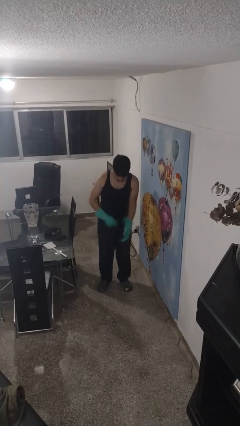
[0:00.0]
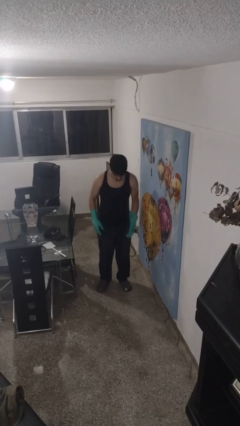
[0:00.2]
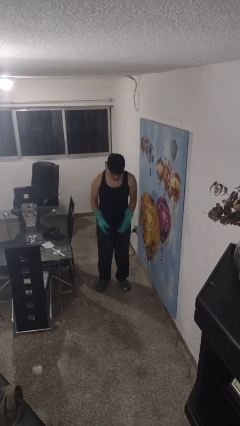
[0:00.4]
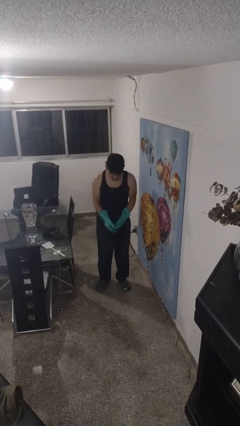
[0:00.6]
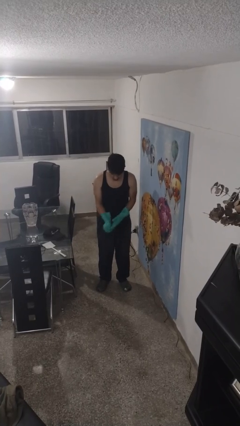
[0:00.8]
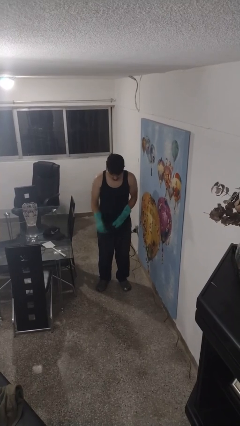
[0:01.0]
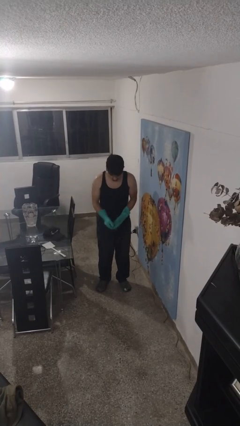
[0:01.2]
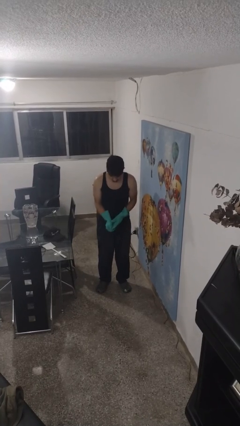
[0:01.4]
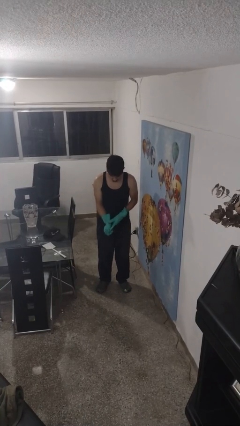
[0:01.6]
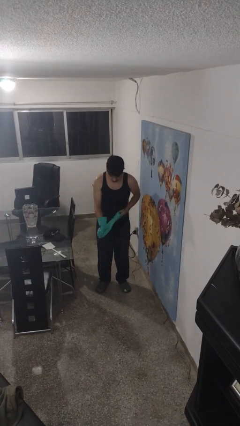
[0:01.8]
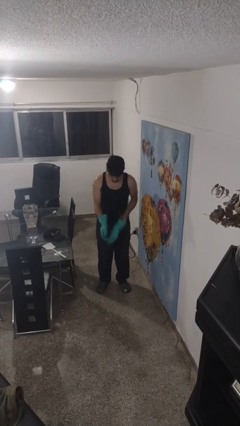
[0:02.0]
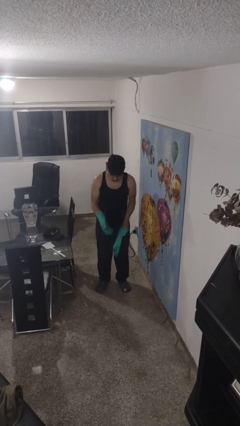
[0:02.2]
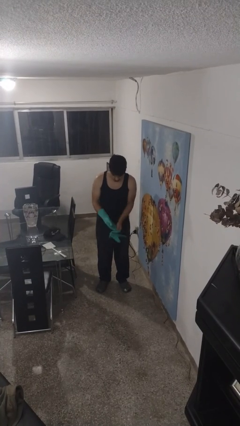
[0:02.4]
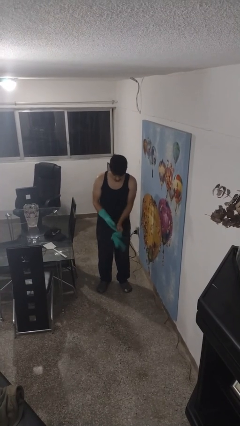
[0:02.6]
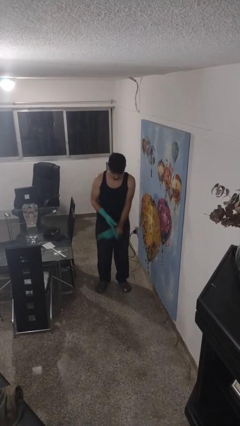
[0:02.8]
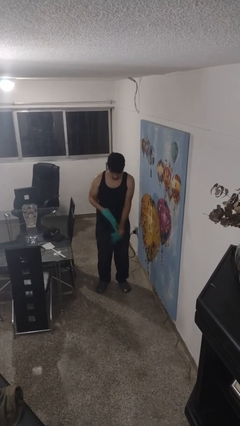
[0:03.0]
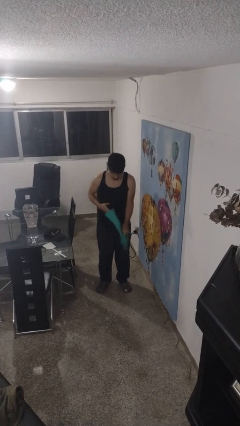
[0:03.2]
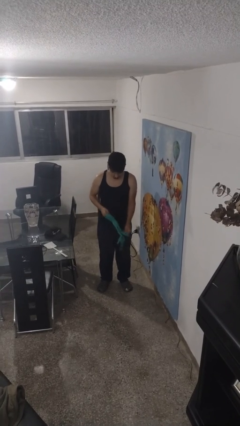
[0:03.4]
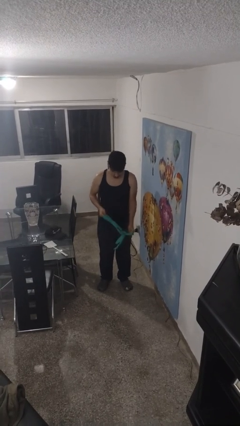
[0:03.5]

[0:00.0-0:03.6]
person takes off gloves

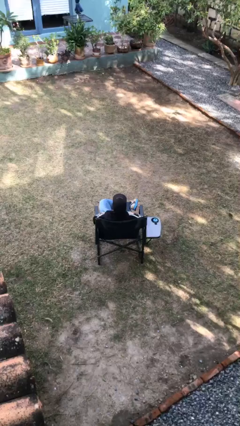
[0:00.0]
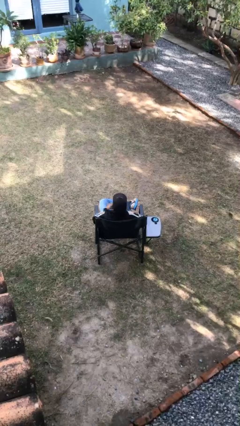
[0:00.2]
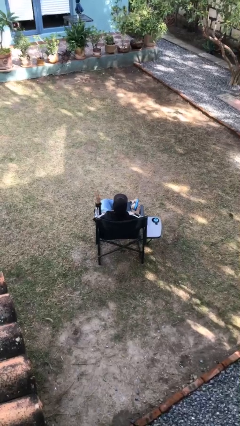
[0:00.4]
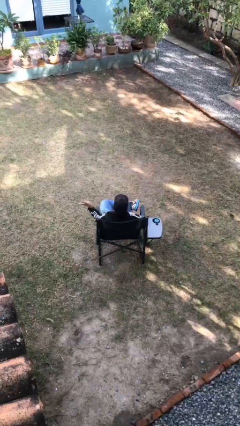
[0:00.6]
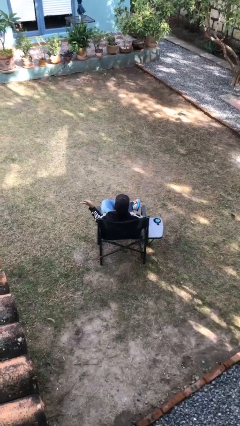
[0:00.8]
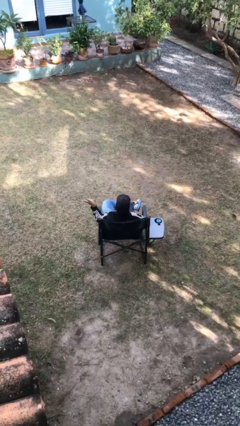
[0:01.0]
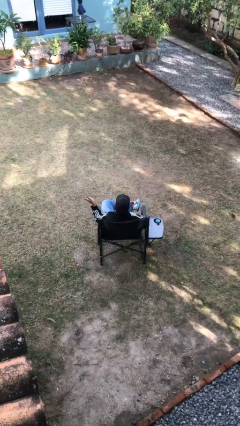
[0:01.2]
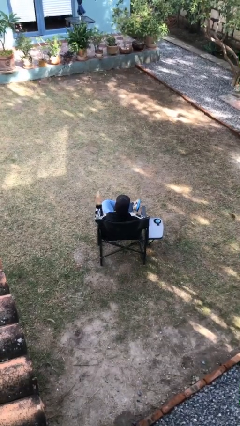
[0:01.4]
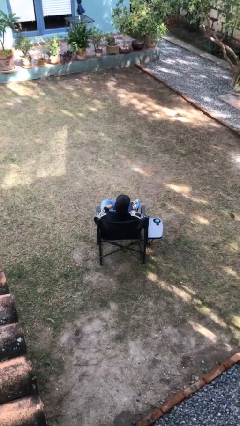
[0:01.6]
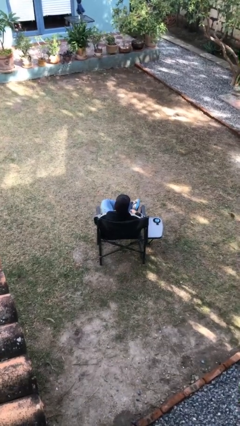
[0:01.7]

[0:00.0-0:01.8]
person gestures number three

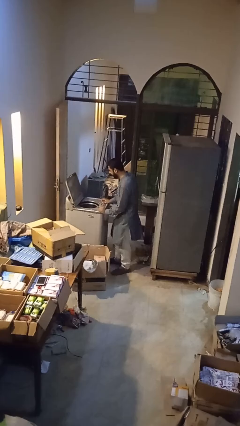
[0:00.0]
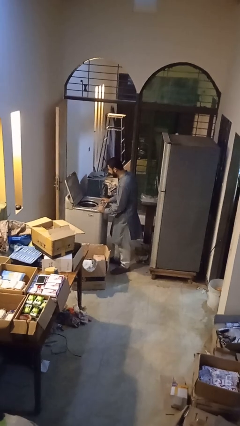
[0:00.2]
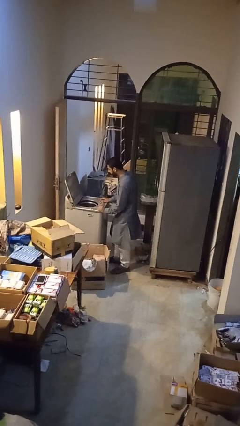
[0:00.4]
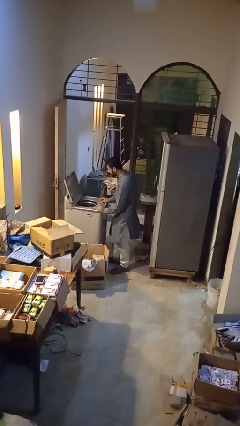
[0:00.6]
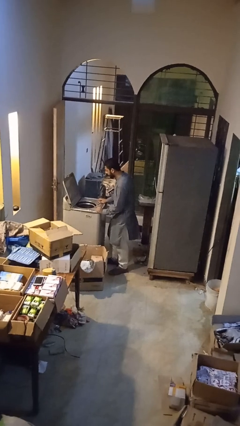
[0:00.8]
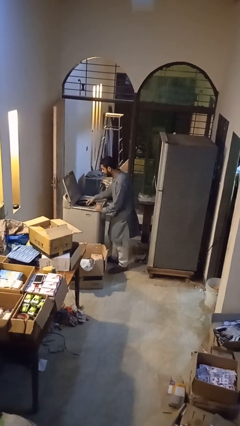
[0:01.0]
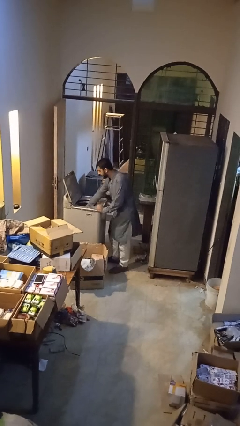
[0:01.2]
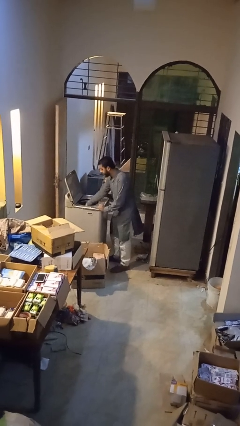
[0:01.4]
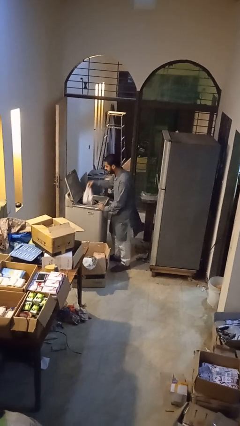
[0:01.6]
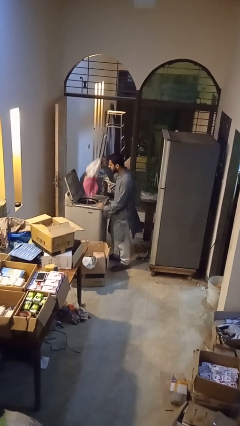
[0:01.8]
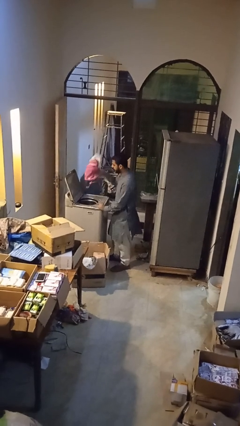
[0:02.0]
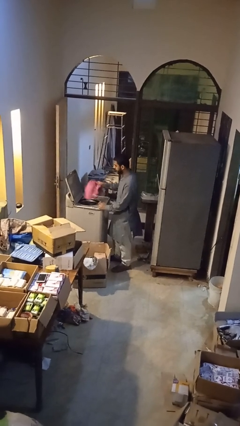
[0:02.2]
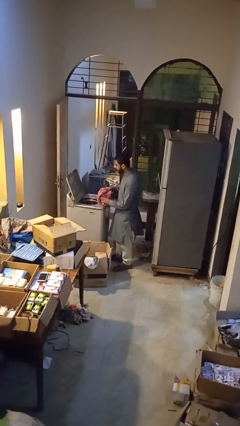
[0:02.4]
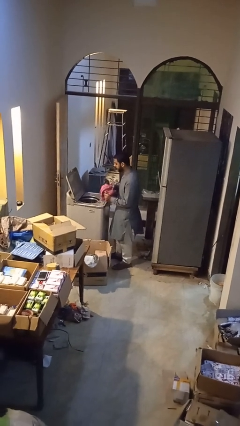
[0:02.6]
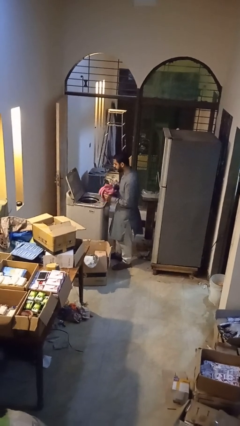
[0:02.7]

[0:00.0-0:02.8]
person unloads dryer

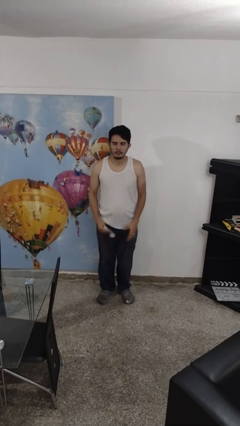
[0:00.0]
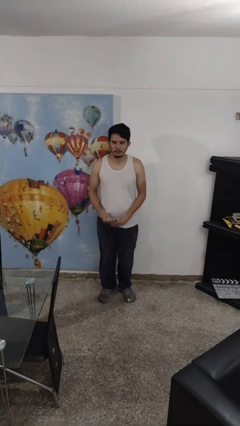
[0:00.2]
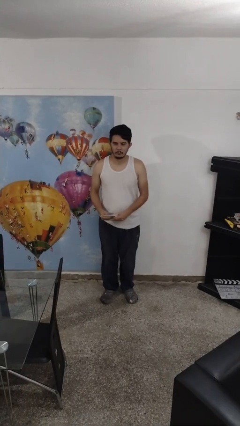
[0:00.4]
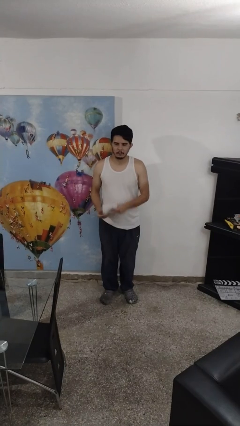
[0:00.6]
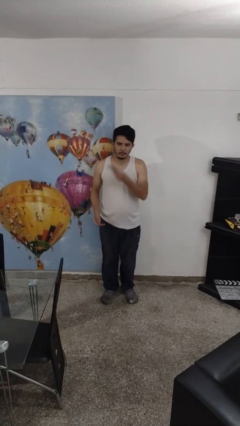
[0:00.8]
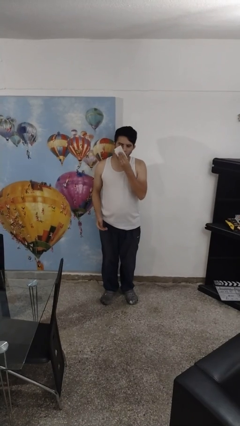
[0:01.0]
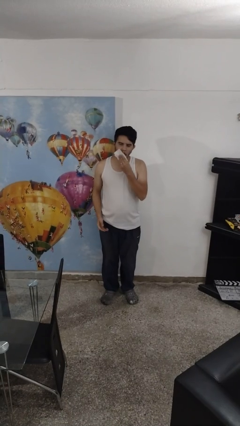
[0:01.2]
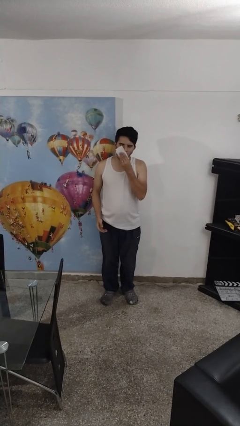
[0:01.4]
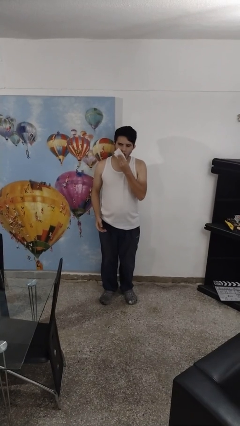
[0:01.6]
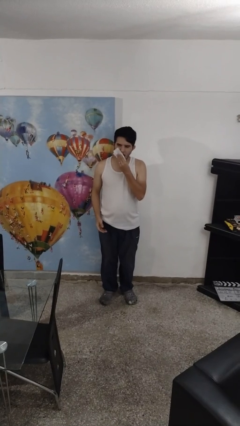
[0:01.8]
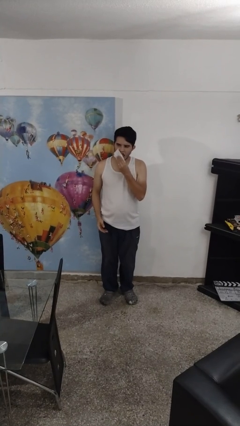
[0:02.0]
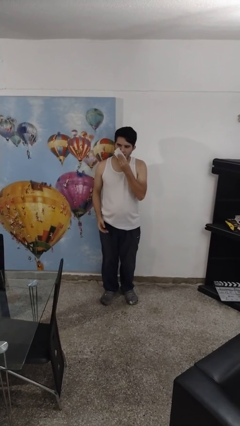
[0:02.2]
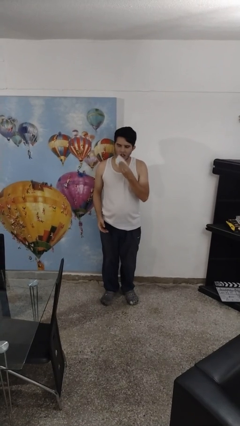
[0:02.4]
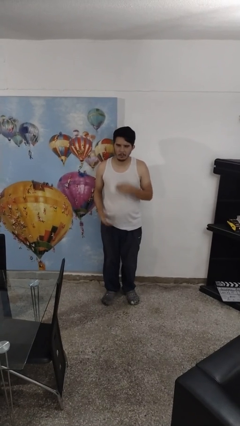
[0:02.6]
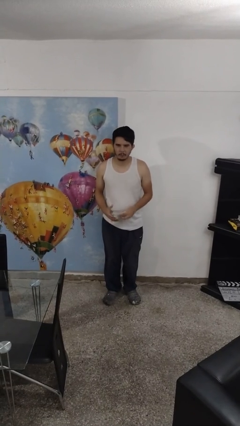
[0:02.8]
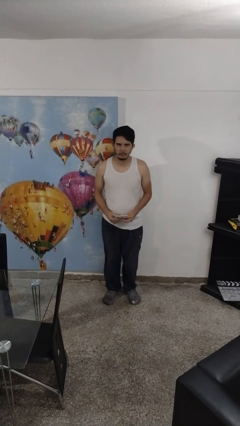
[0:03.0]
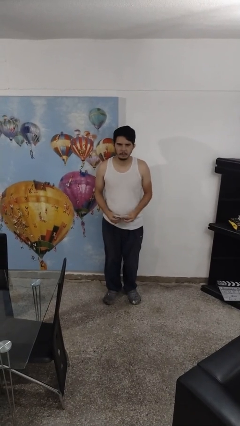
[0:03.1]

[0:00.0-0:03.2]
person wipes mouth with napkin

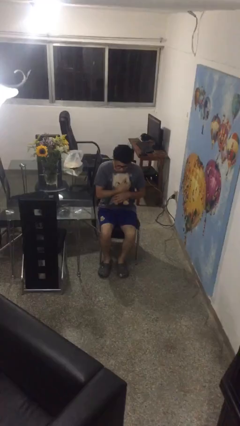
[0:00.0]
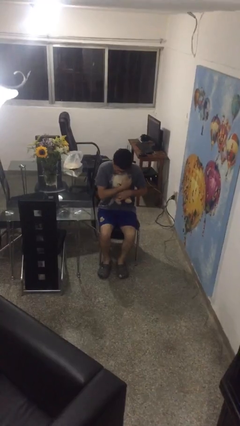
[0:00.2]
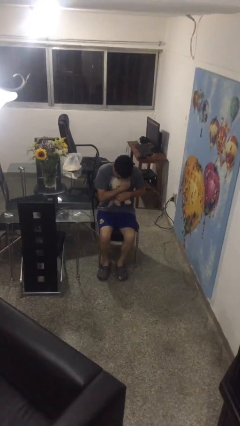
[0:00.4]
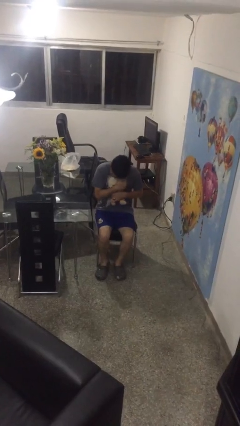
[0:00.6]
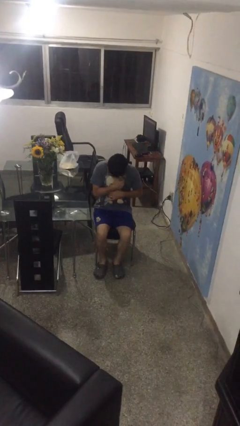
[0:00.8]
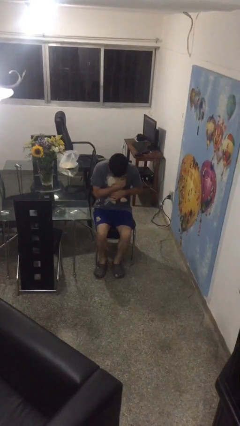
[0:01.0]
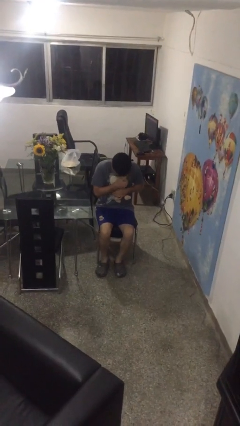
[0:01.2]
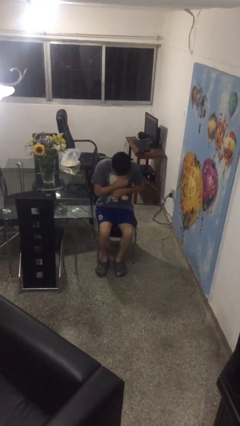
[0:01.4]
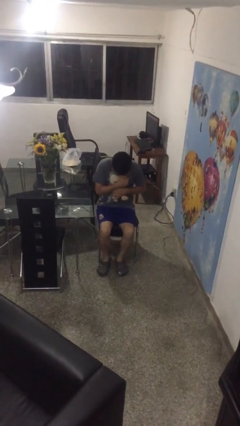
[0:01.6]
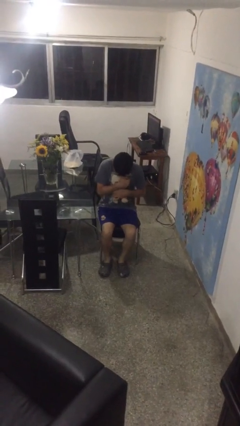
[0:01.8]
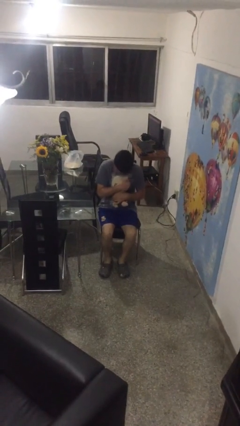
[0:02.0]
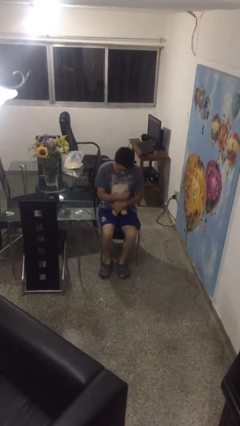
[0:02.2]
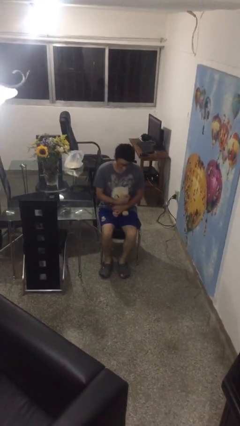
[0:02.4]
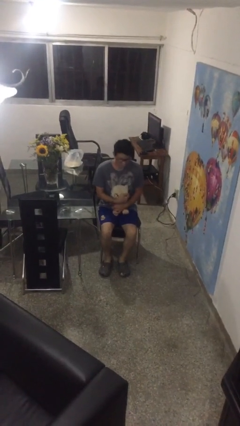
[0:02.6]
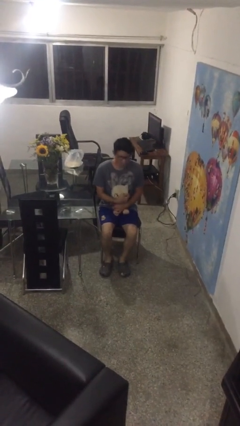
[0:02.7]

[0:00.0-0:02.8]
person hugs stuffed animal

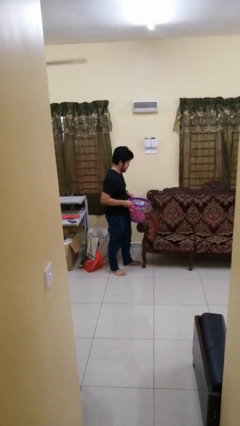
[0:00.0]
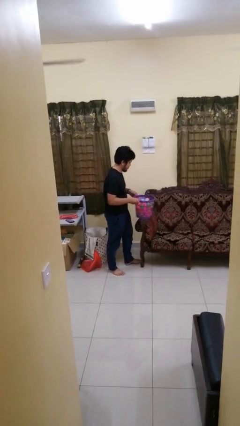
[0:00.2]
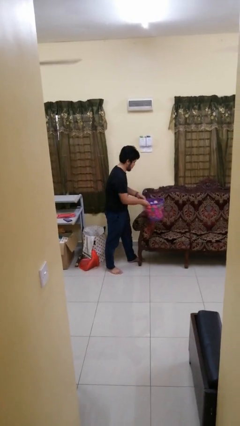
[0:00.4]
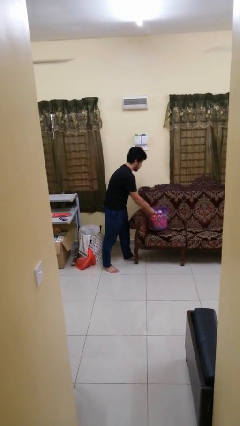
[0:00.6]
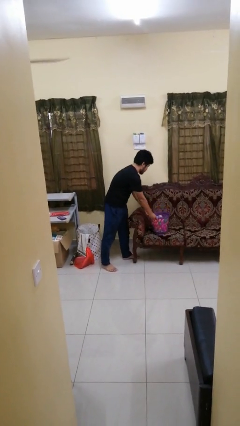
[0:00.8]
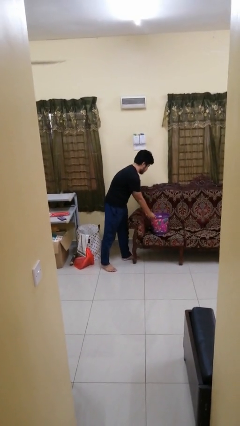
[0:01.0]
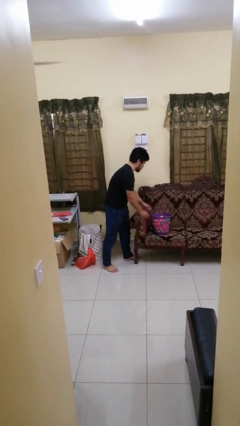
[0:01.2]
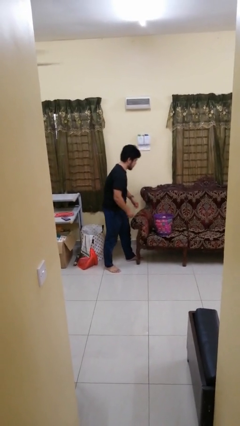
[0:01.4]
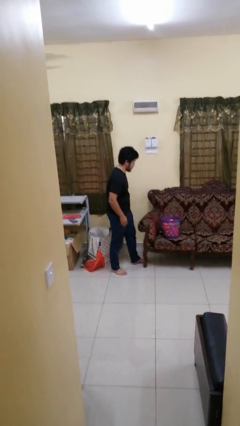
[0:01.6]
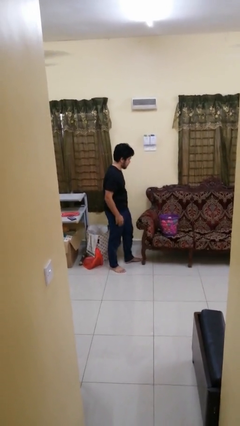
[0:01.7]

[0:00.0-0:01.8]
person picks up object from couch

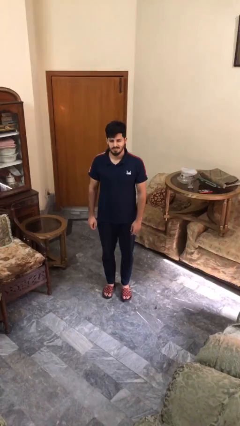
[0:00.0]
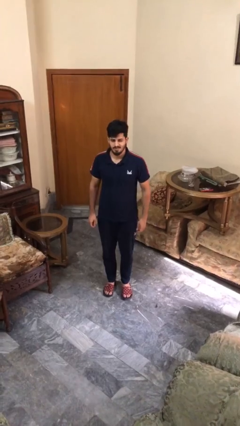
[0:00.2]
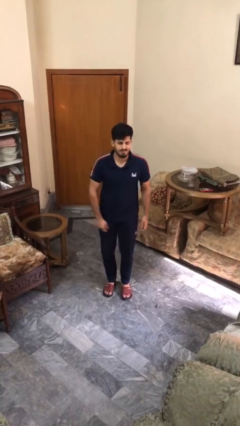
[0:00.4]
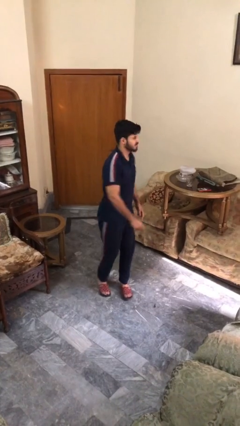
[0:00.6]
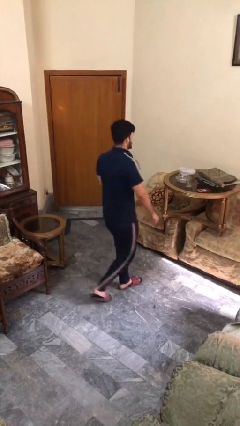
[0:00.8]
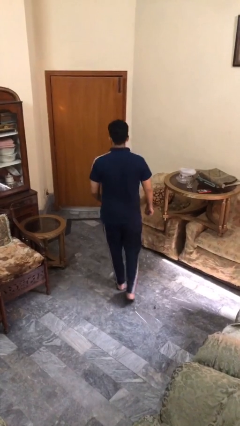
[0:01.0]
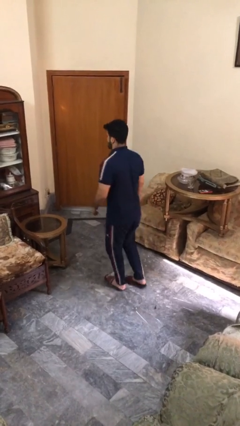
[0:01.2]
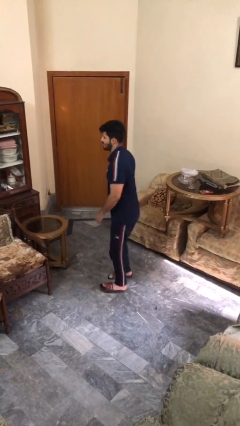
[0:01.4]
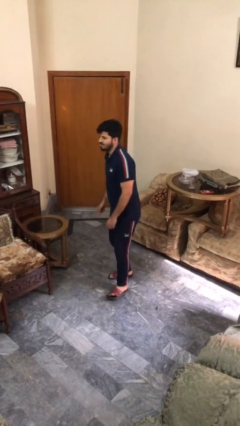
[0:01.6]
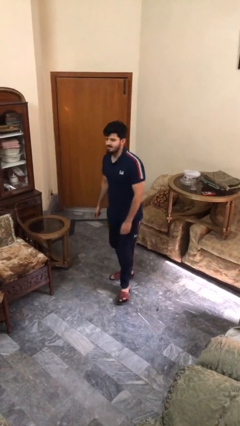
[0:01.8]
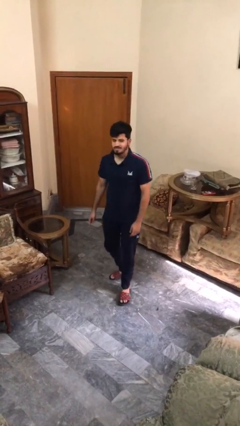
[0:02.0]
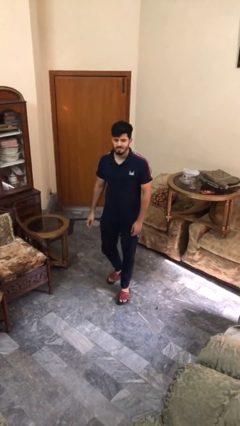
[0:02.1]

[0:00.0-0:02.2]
person twirls
